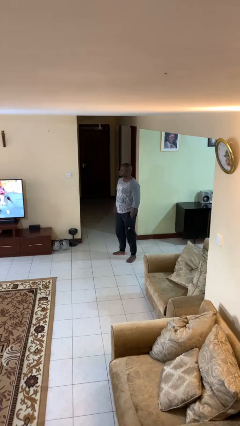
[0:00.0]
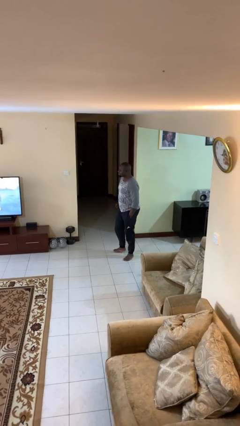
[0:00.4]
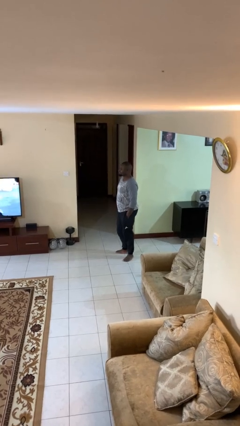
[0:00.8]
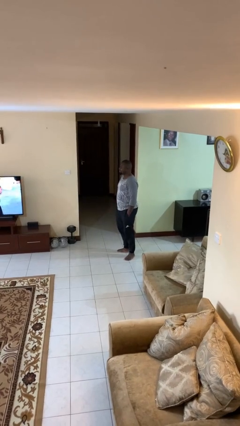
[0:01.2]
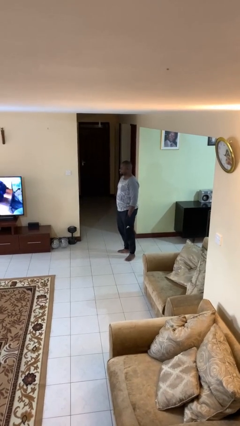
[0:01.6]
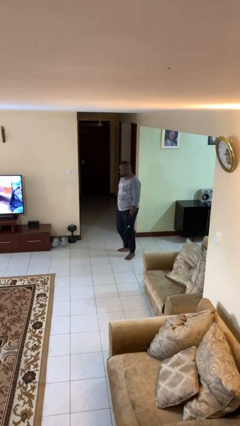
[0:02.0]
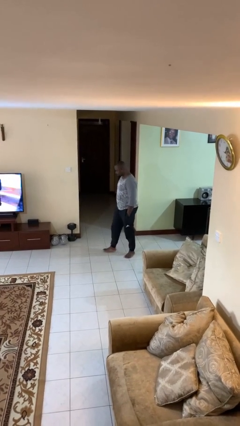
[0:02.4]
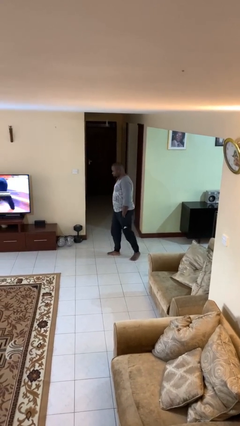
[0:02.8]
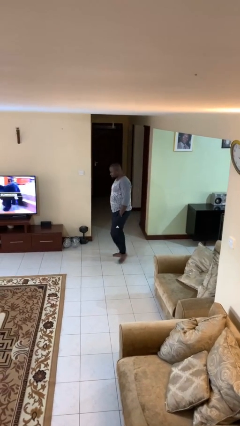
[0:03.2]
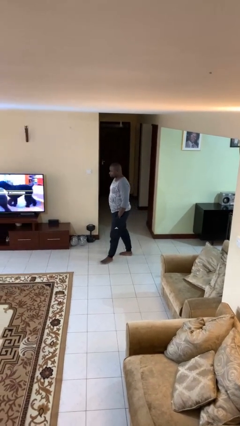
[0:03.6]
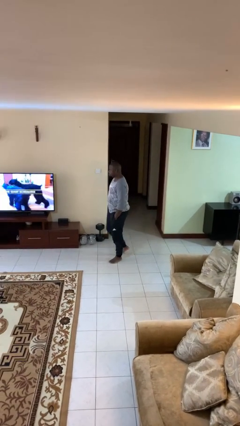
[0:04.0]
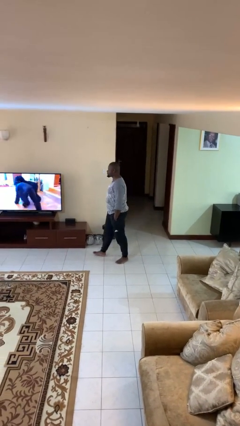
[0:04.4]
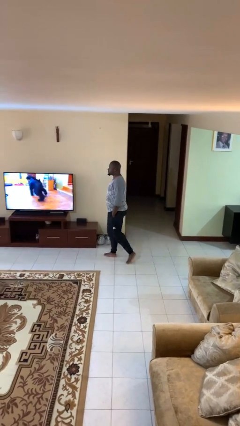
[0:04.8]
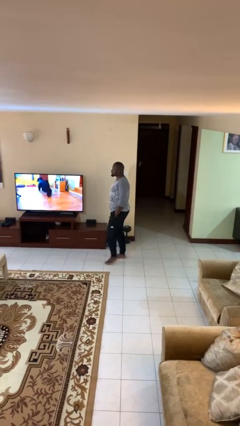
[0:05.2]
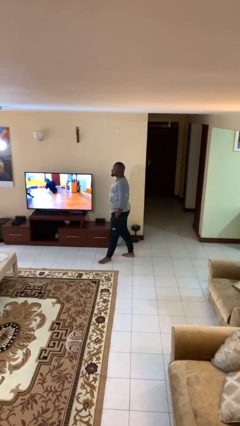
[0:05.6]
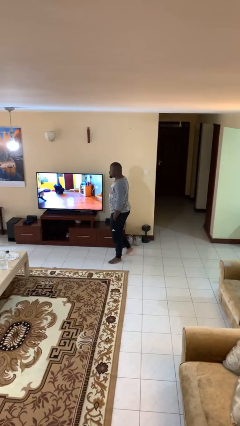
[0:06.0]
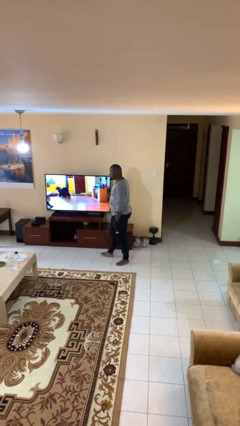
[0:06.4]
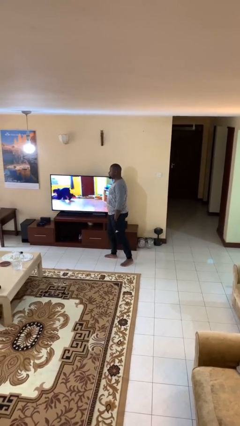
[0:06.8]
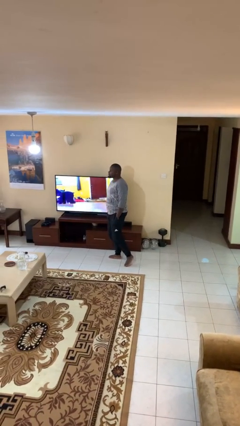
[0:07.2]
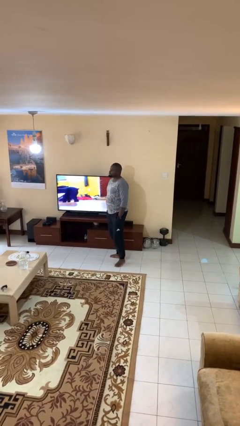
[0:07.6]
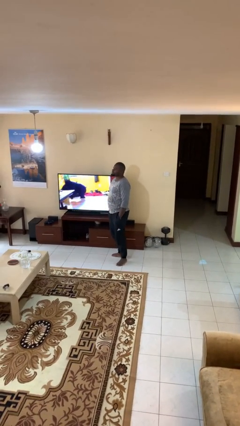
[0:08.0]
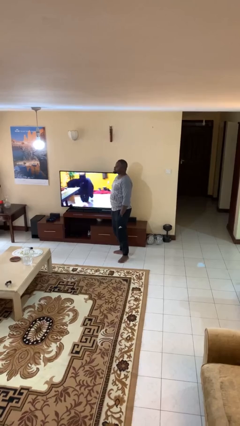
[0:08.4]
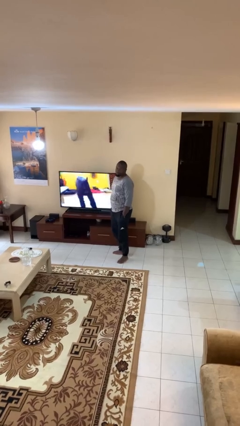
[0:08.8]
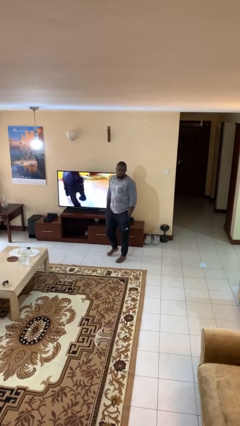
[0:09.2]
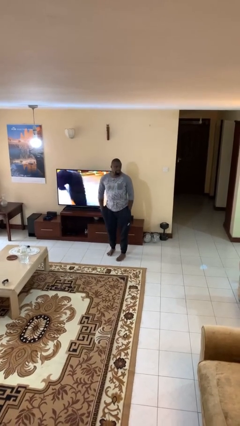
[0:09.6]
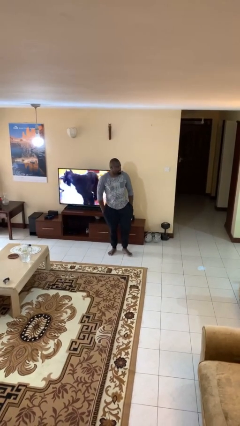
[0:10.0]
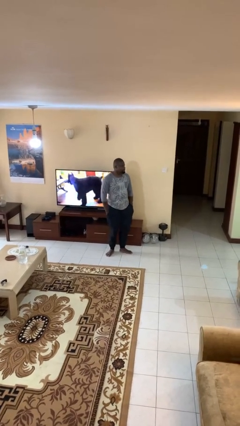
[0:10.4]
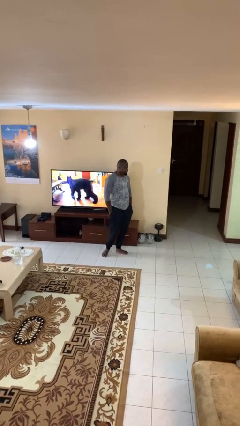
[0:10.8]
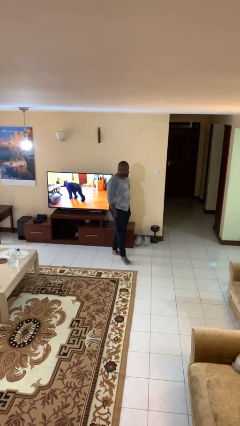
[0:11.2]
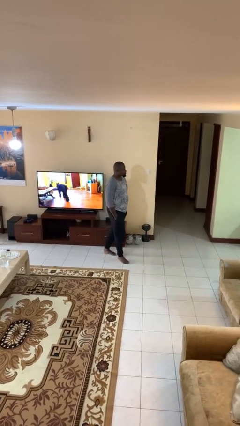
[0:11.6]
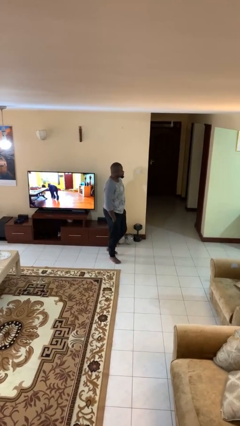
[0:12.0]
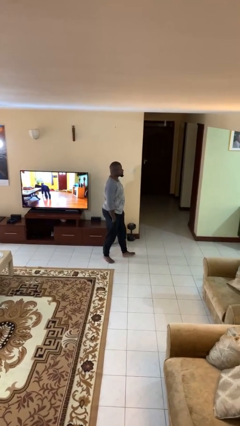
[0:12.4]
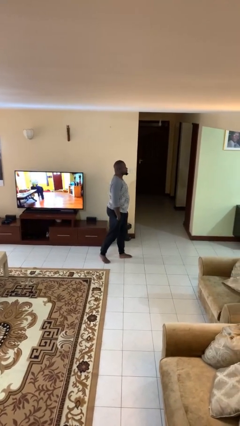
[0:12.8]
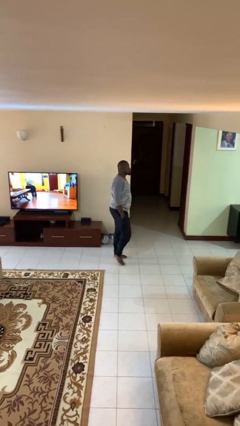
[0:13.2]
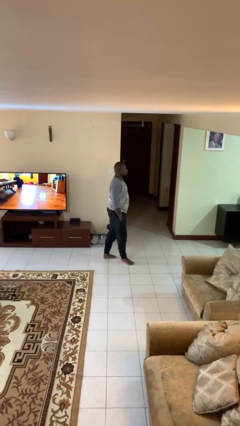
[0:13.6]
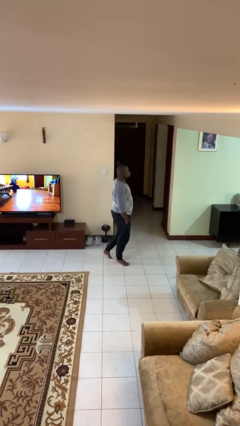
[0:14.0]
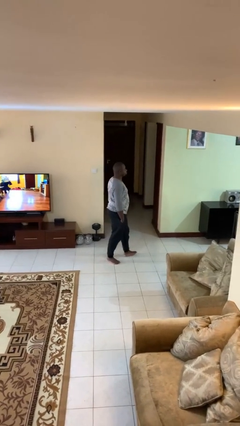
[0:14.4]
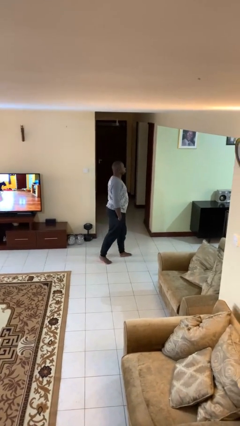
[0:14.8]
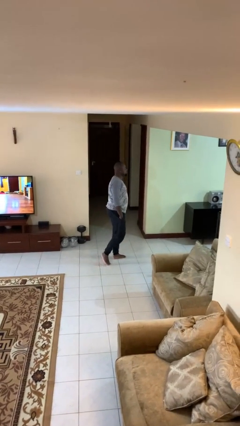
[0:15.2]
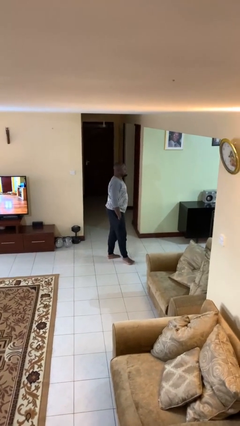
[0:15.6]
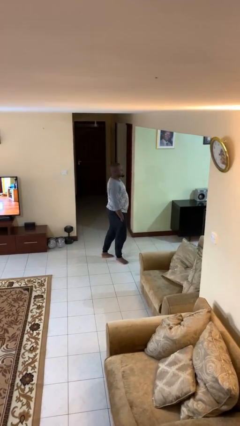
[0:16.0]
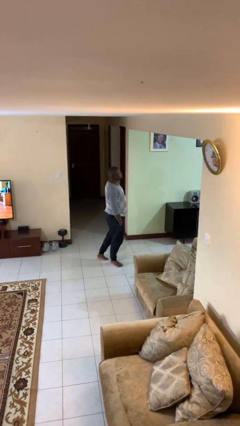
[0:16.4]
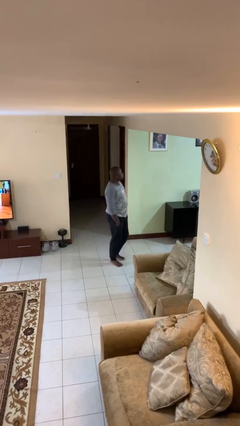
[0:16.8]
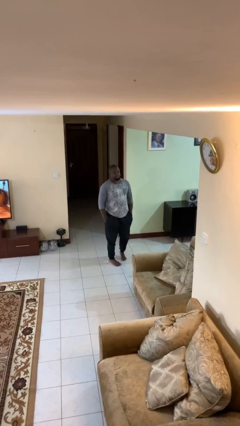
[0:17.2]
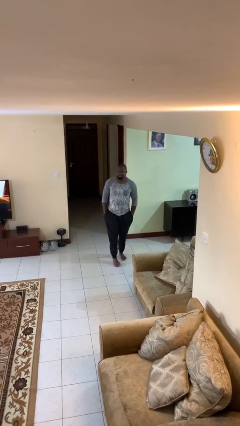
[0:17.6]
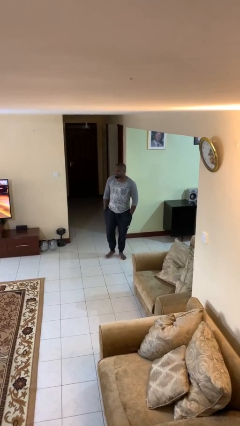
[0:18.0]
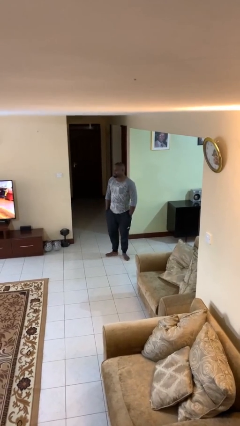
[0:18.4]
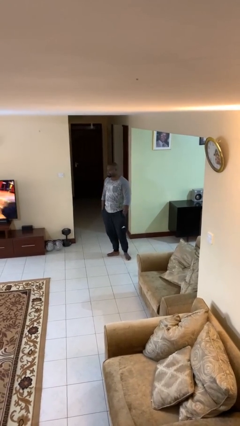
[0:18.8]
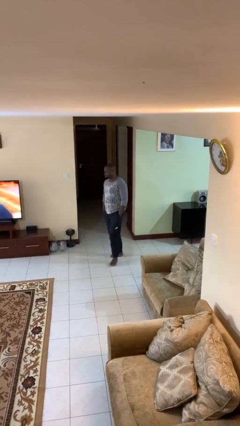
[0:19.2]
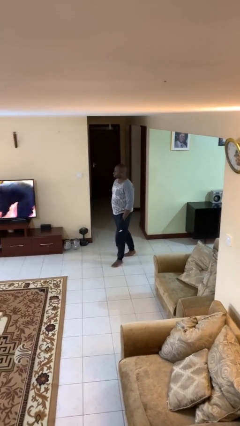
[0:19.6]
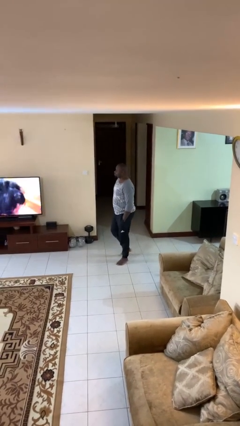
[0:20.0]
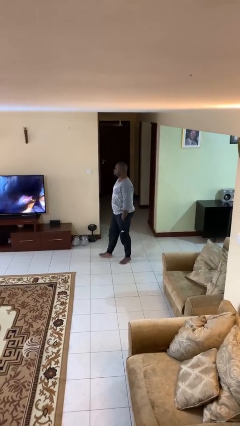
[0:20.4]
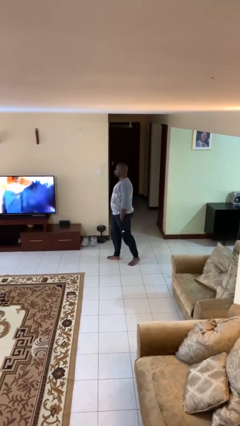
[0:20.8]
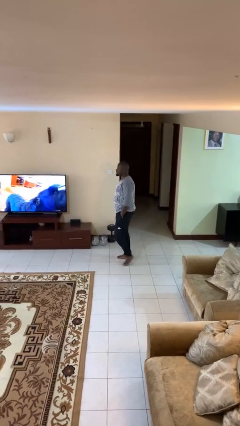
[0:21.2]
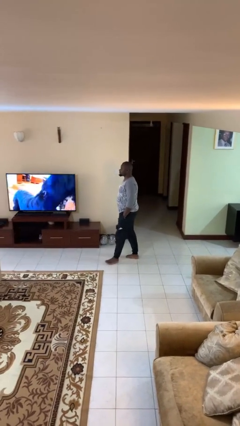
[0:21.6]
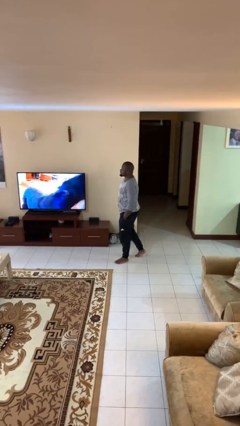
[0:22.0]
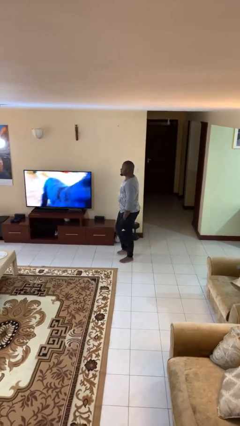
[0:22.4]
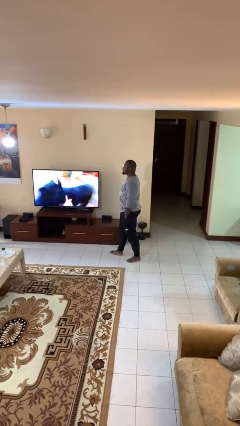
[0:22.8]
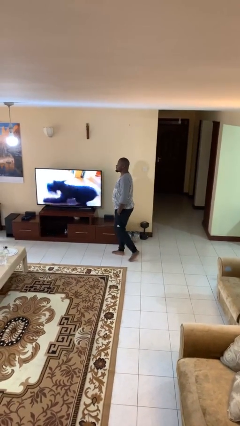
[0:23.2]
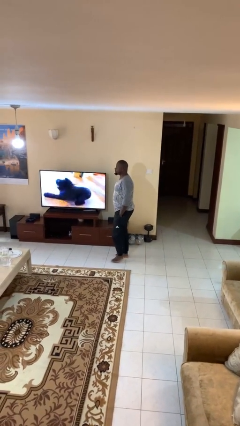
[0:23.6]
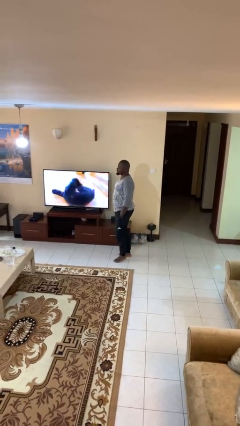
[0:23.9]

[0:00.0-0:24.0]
person walks

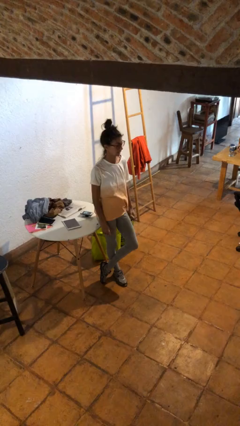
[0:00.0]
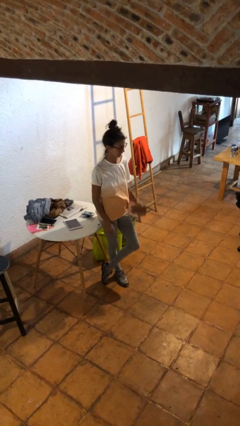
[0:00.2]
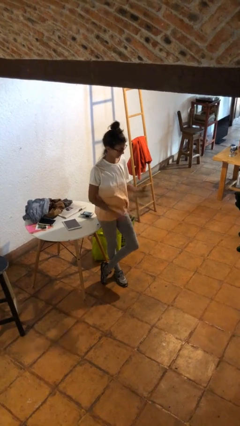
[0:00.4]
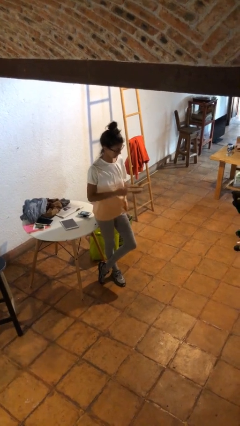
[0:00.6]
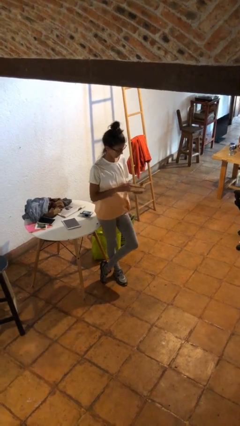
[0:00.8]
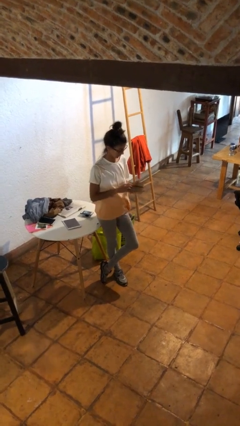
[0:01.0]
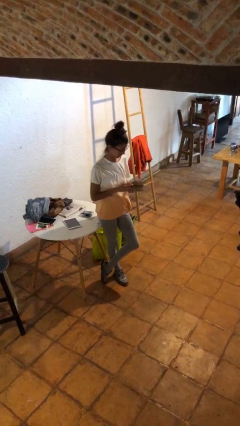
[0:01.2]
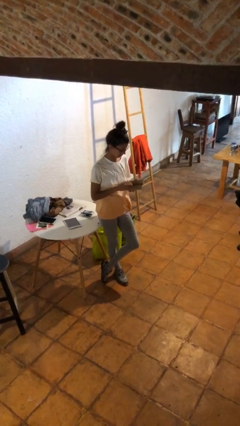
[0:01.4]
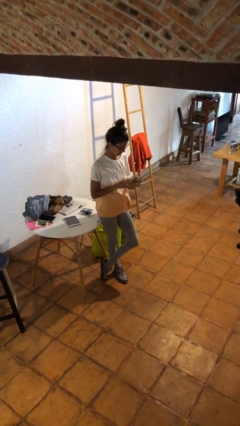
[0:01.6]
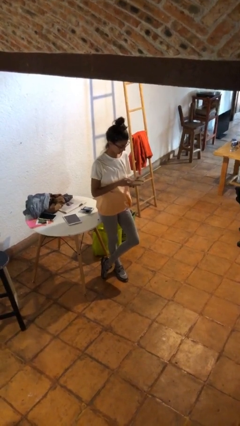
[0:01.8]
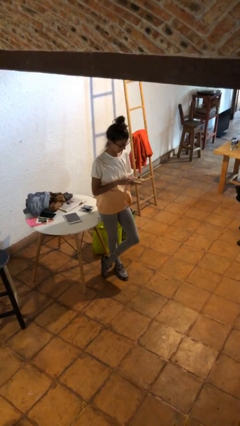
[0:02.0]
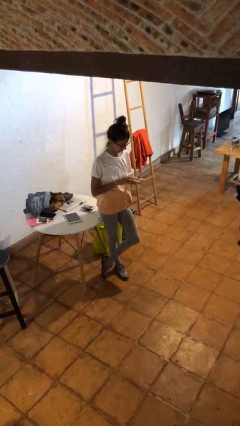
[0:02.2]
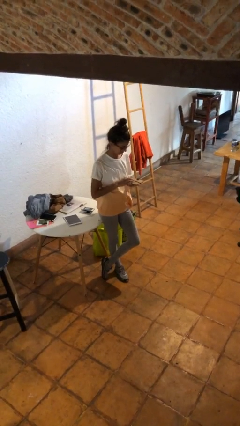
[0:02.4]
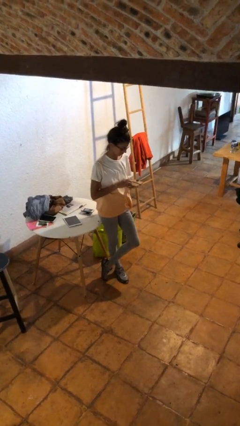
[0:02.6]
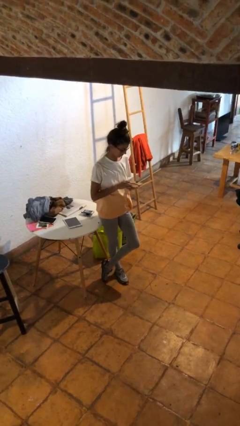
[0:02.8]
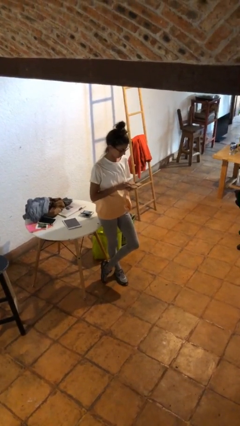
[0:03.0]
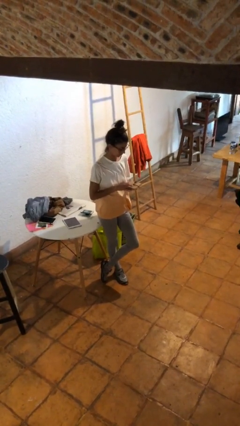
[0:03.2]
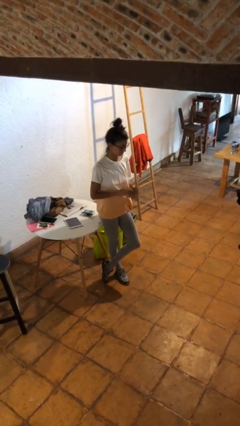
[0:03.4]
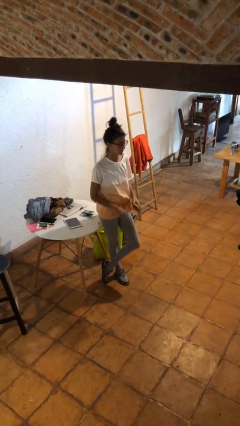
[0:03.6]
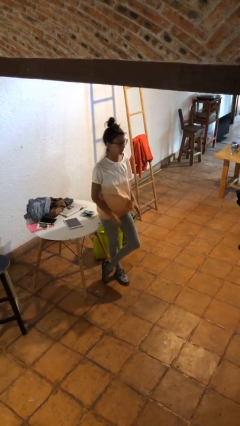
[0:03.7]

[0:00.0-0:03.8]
person taps object with finger

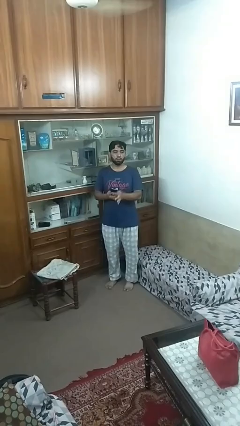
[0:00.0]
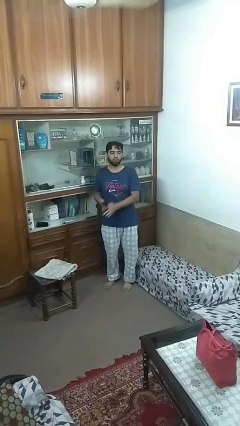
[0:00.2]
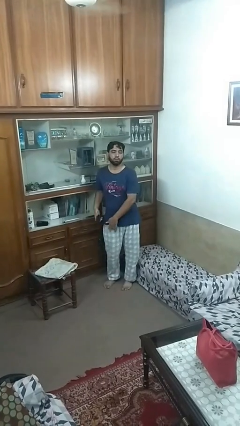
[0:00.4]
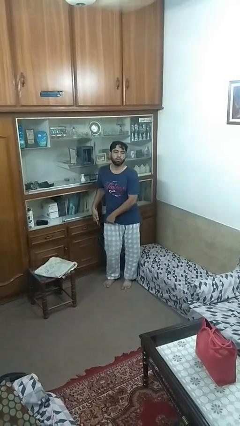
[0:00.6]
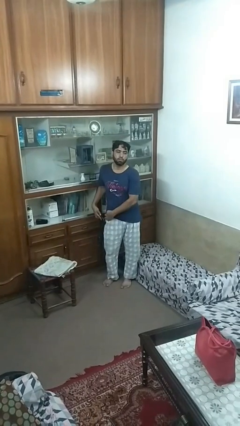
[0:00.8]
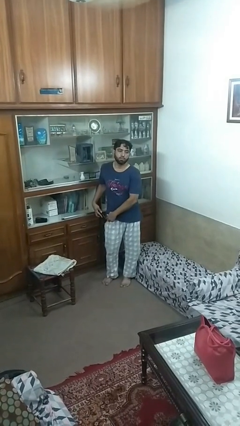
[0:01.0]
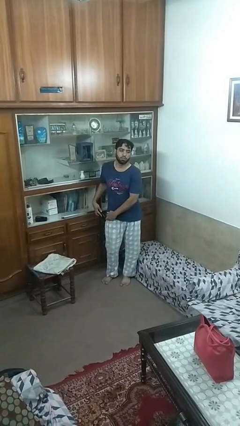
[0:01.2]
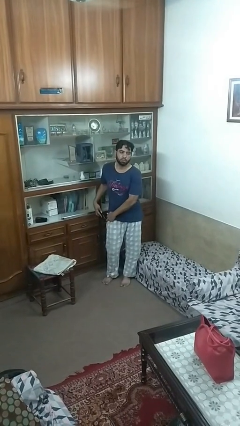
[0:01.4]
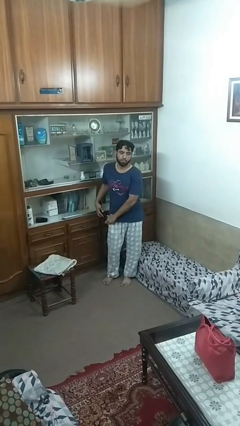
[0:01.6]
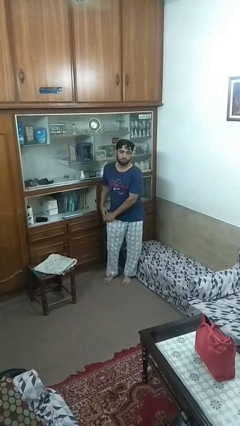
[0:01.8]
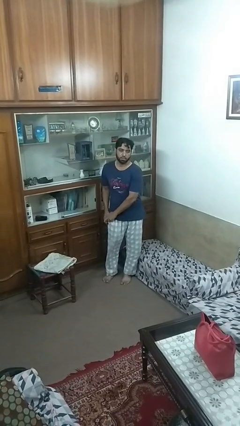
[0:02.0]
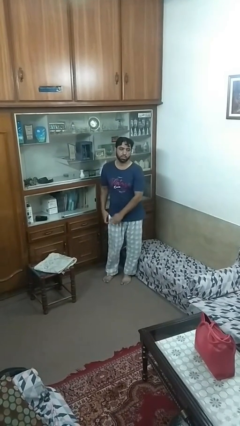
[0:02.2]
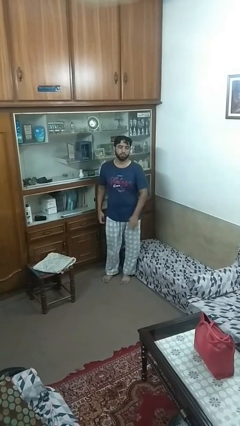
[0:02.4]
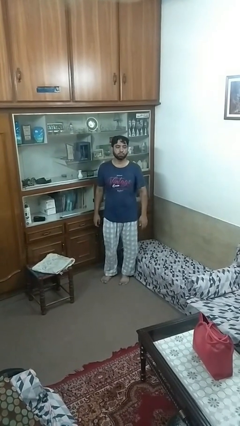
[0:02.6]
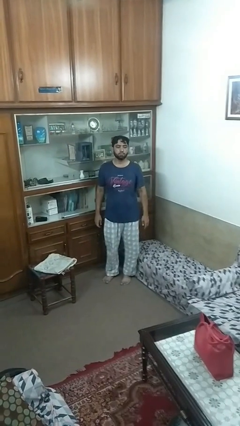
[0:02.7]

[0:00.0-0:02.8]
person puts phone into pocket
